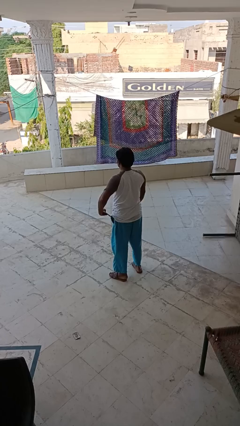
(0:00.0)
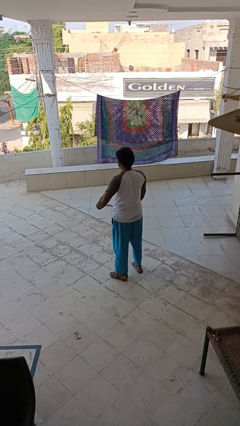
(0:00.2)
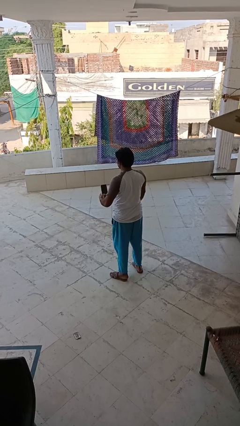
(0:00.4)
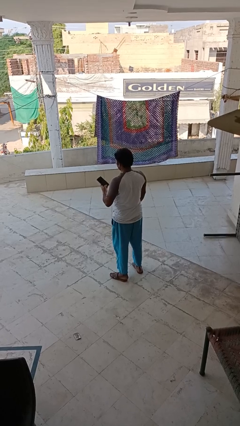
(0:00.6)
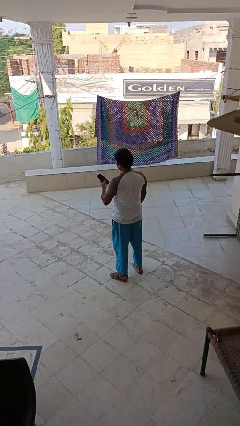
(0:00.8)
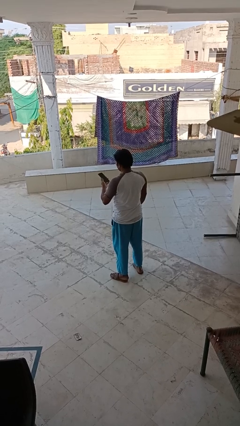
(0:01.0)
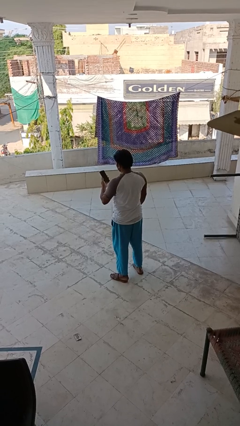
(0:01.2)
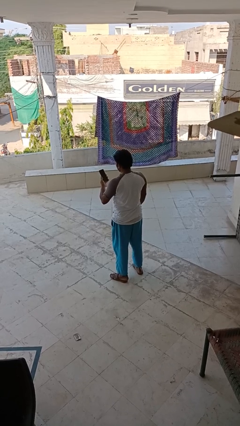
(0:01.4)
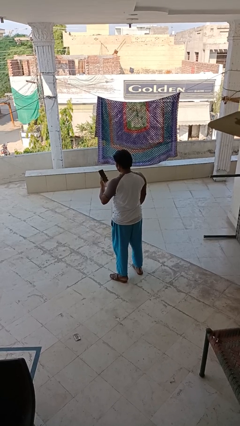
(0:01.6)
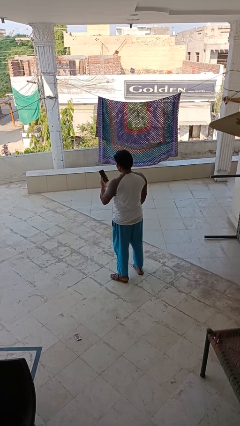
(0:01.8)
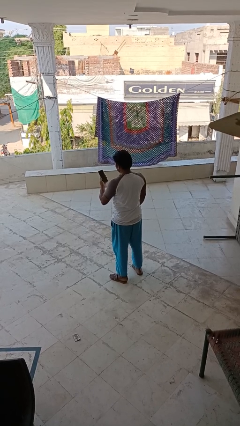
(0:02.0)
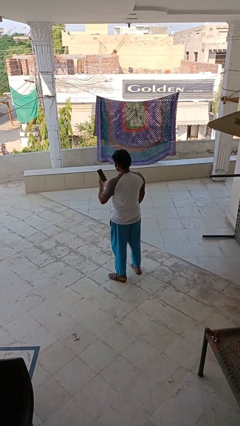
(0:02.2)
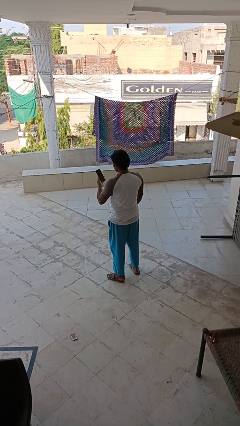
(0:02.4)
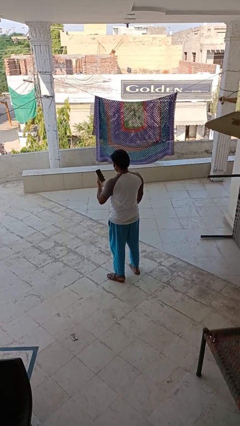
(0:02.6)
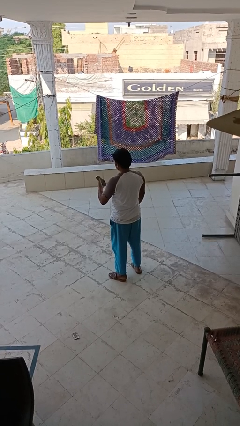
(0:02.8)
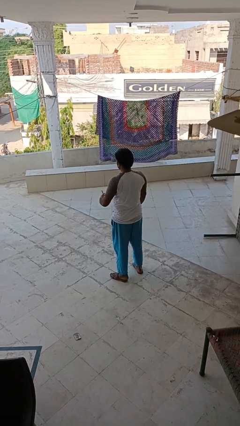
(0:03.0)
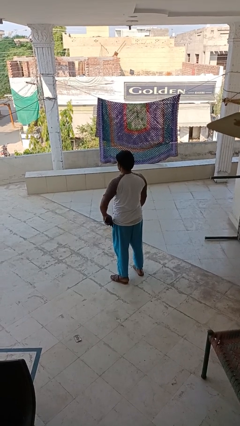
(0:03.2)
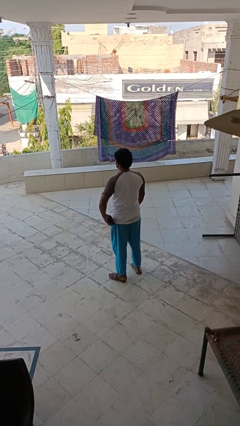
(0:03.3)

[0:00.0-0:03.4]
person takes phone from pocket

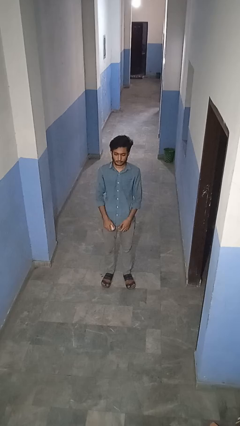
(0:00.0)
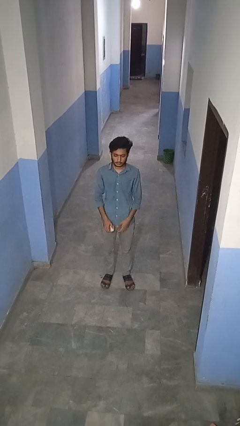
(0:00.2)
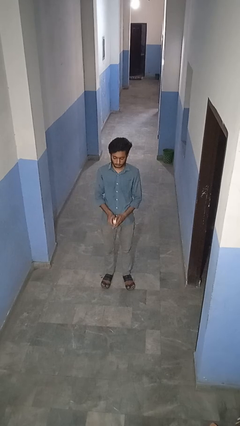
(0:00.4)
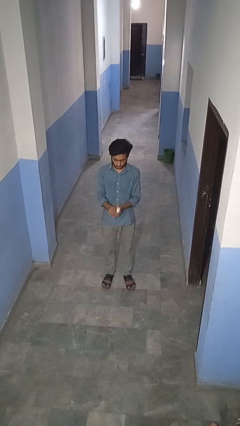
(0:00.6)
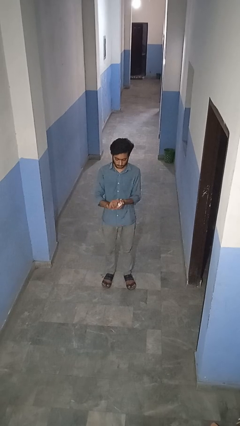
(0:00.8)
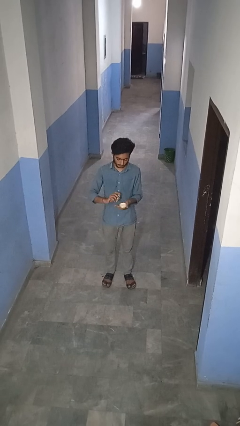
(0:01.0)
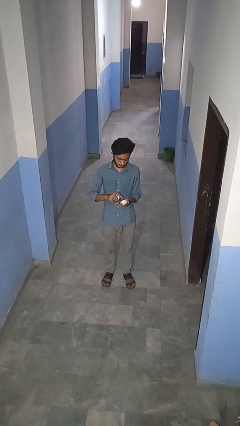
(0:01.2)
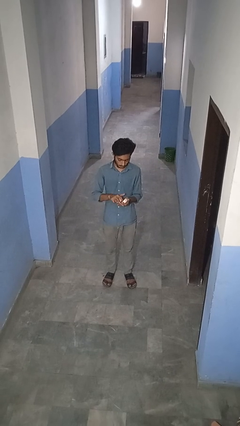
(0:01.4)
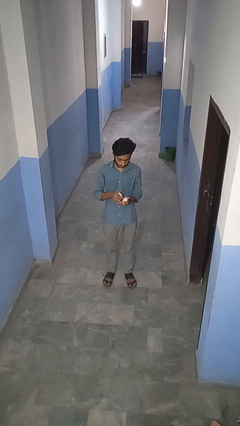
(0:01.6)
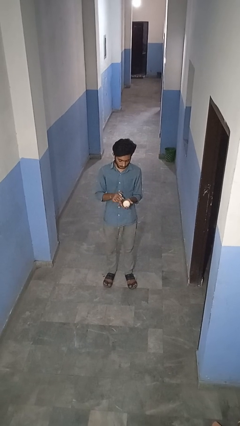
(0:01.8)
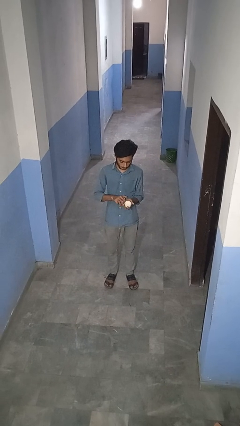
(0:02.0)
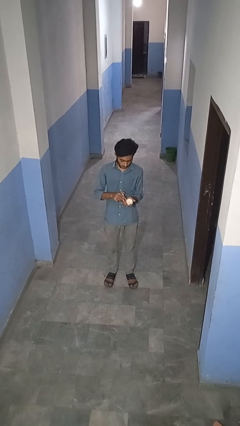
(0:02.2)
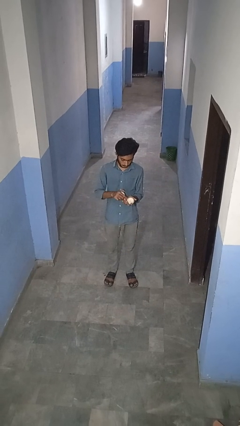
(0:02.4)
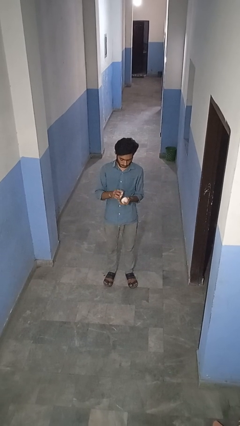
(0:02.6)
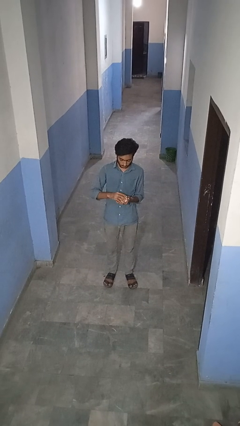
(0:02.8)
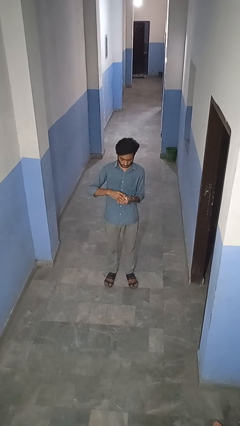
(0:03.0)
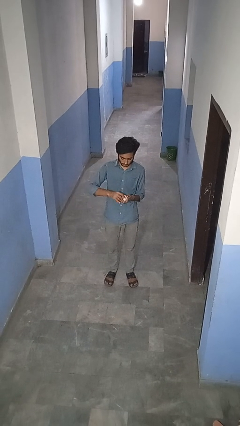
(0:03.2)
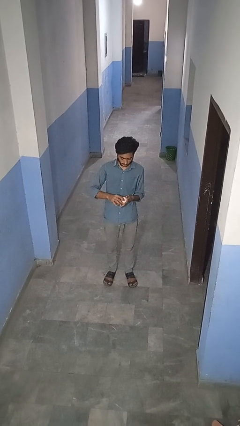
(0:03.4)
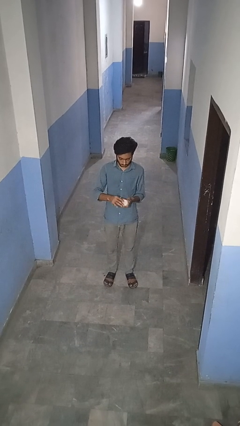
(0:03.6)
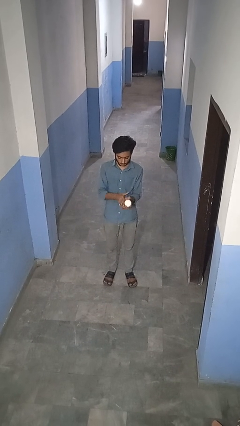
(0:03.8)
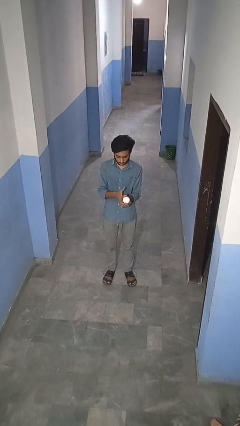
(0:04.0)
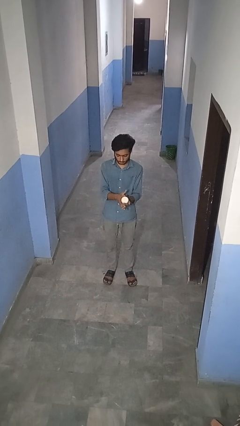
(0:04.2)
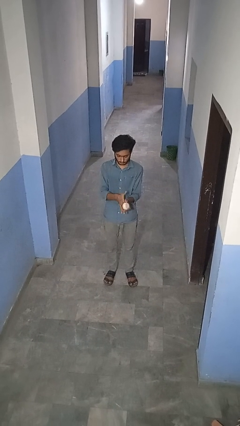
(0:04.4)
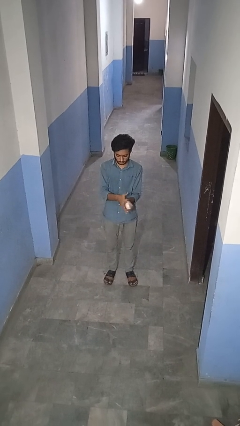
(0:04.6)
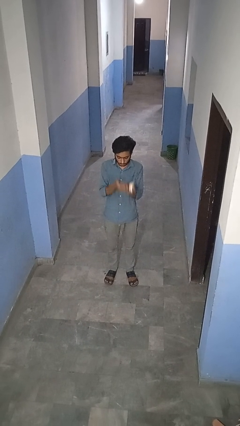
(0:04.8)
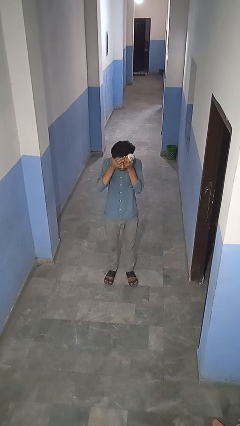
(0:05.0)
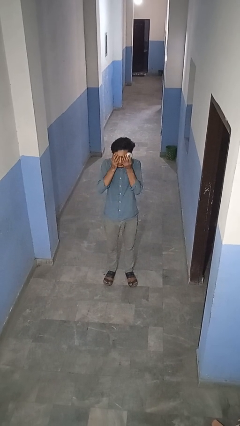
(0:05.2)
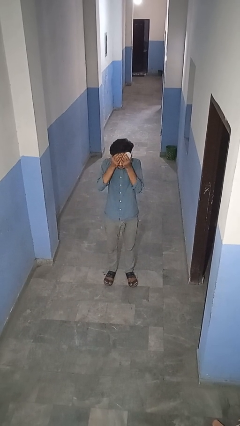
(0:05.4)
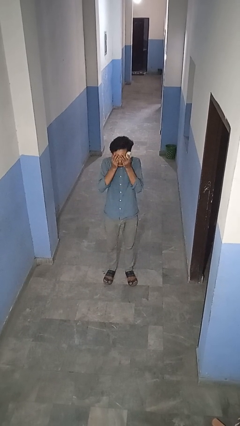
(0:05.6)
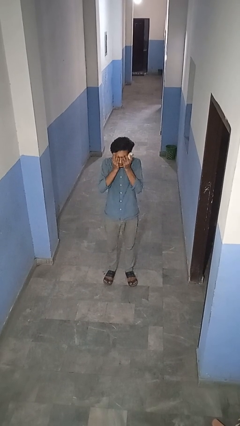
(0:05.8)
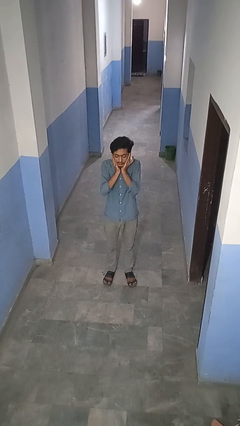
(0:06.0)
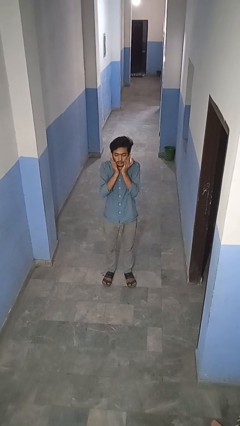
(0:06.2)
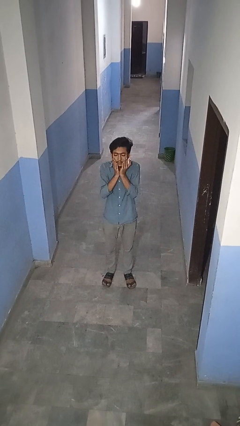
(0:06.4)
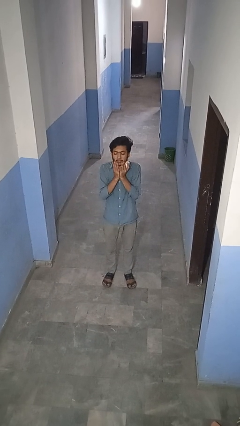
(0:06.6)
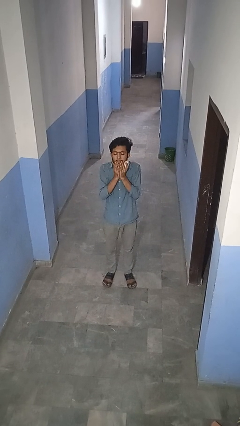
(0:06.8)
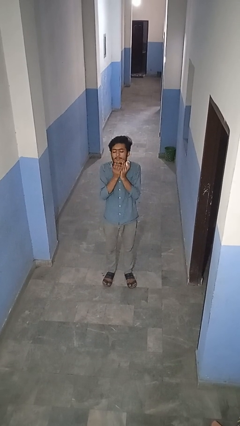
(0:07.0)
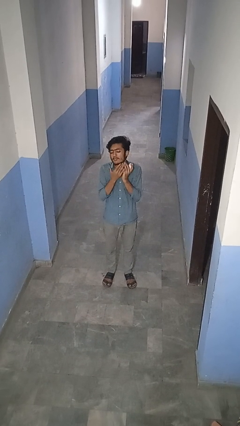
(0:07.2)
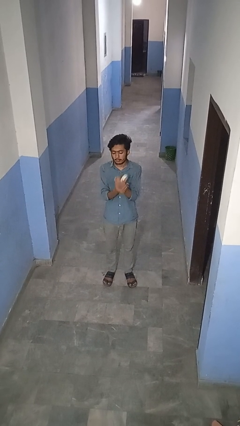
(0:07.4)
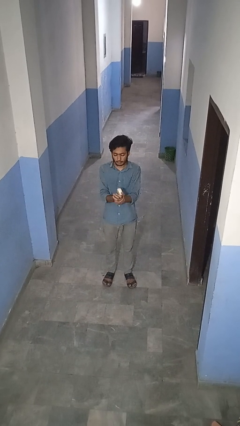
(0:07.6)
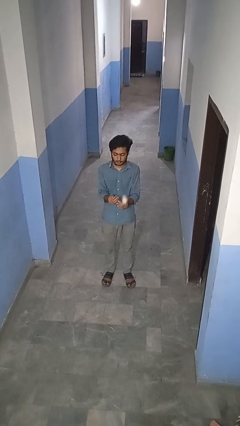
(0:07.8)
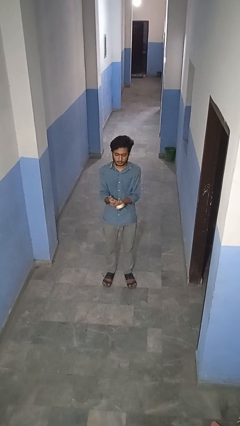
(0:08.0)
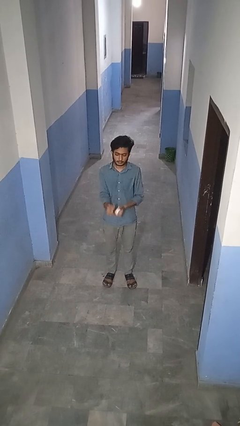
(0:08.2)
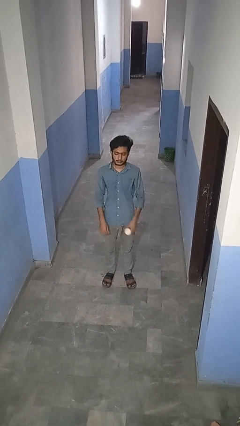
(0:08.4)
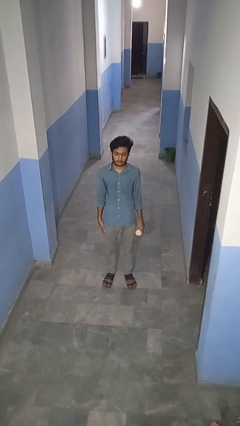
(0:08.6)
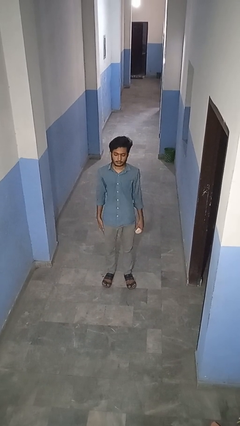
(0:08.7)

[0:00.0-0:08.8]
person applies facial moisturizer

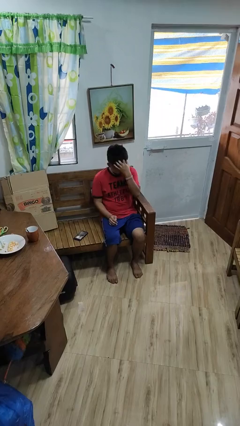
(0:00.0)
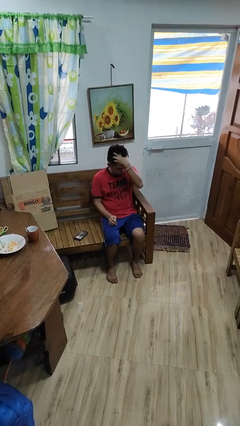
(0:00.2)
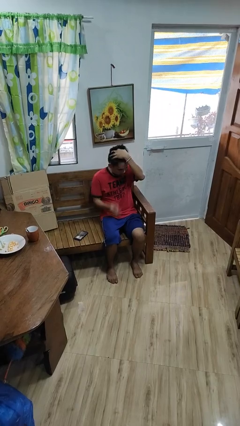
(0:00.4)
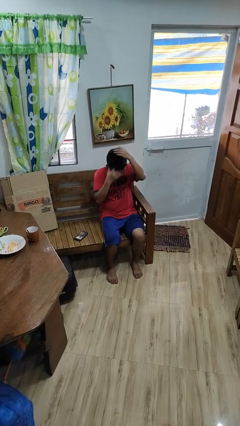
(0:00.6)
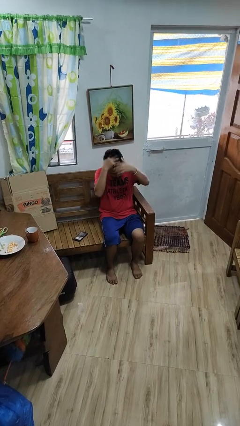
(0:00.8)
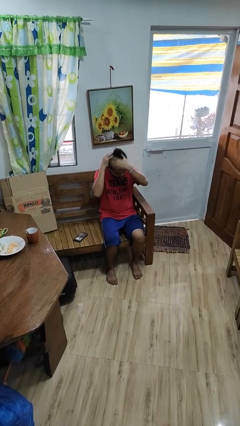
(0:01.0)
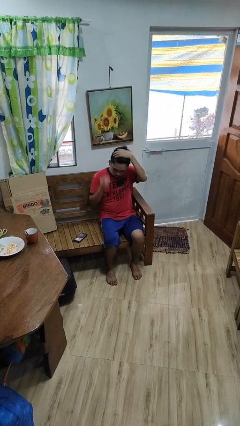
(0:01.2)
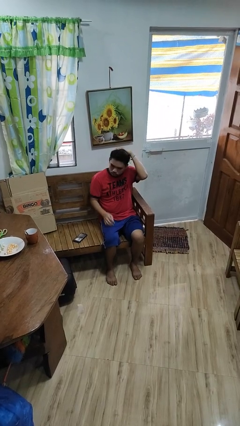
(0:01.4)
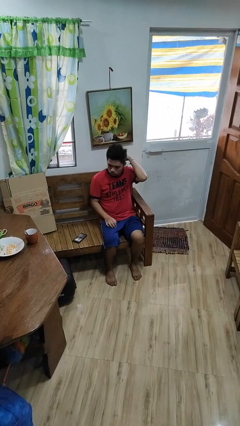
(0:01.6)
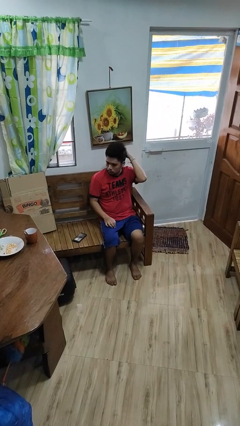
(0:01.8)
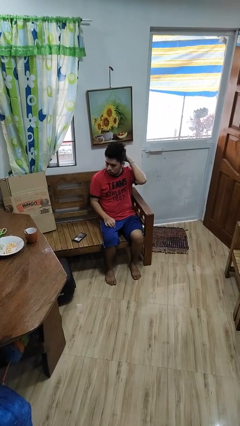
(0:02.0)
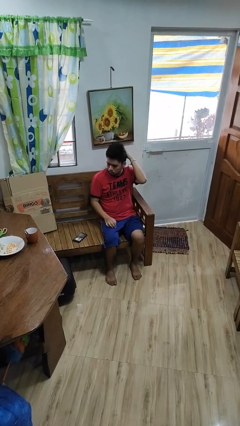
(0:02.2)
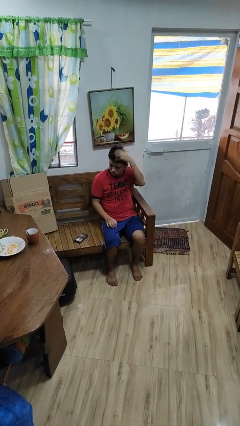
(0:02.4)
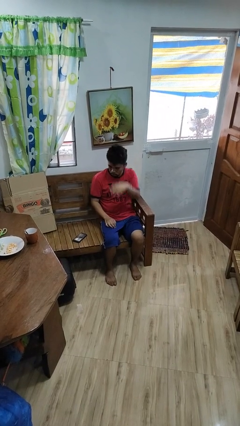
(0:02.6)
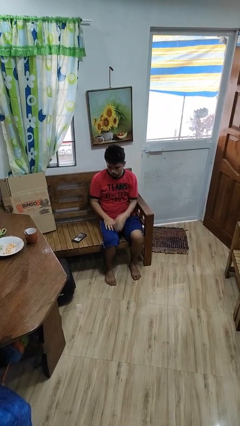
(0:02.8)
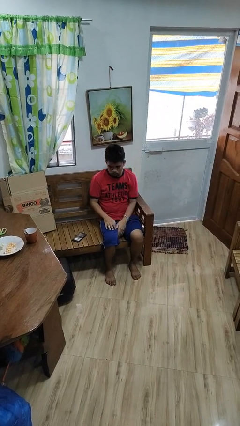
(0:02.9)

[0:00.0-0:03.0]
person strokes hair

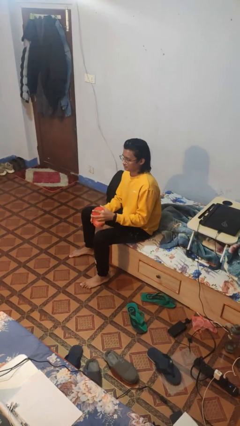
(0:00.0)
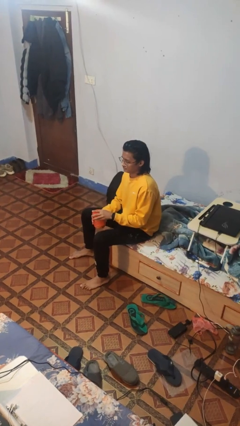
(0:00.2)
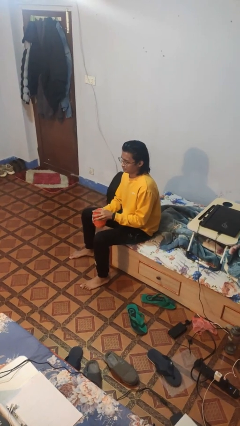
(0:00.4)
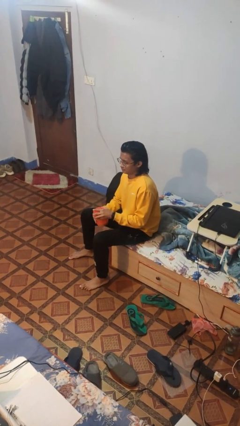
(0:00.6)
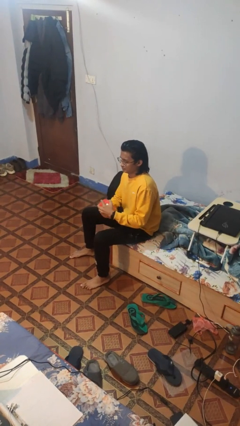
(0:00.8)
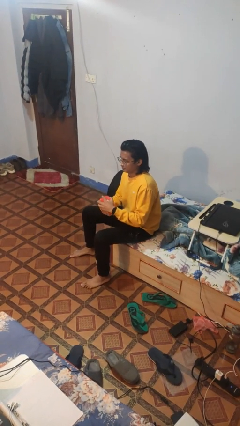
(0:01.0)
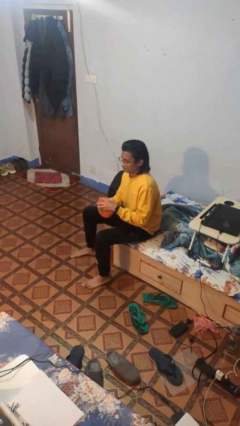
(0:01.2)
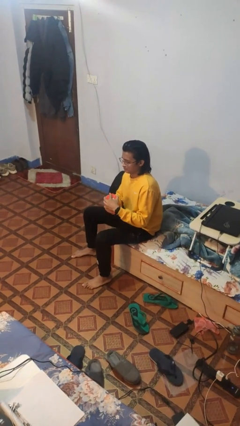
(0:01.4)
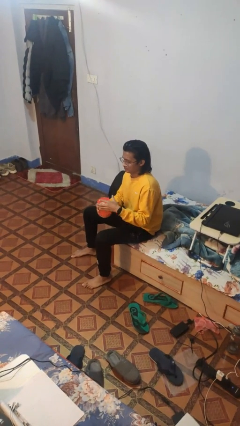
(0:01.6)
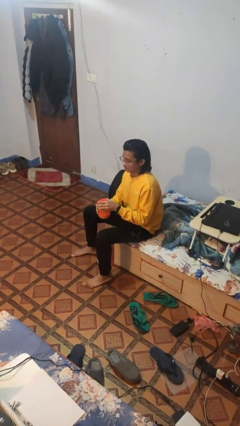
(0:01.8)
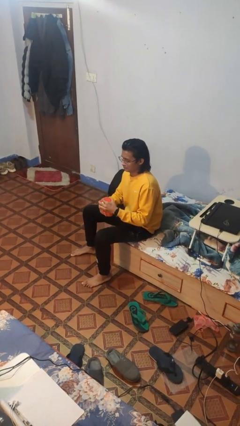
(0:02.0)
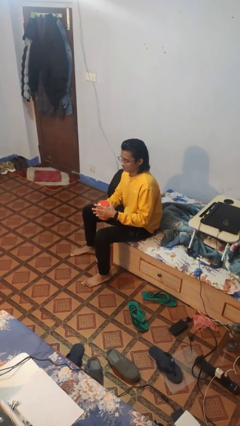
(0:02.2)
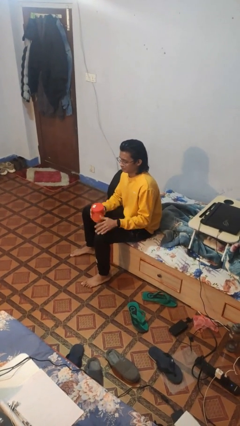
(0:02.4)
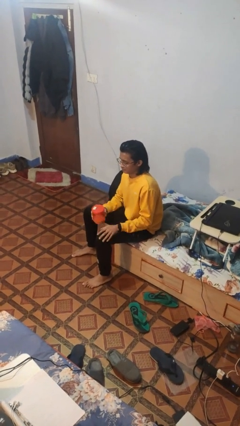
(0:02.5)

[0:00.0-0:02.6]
person closes jar
